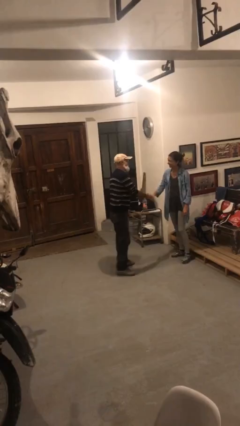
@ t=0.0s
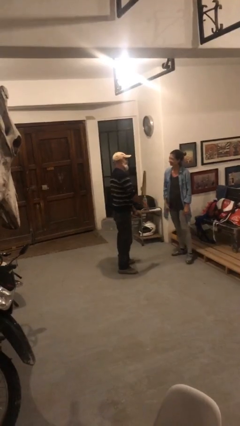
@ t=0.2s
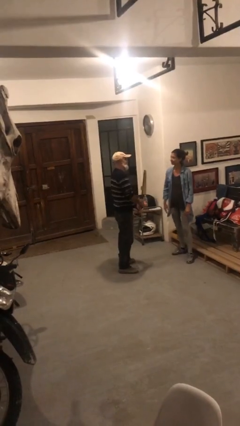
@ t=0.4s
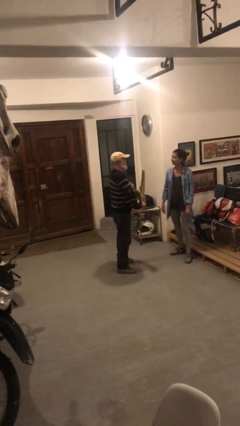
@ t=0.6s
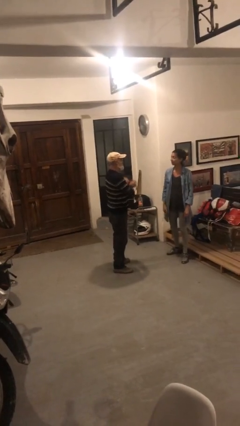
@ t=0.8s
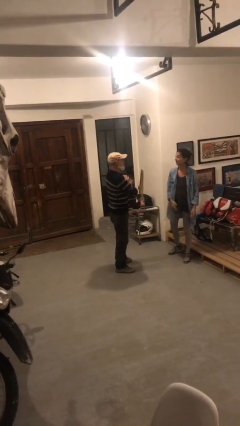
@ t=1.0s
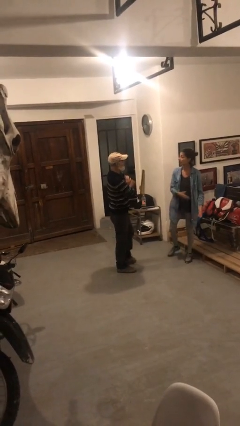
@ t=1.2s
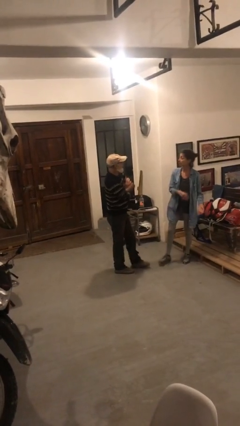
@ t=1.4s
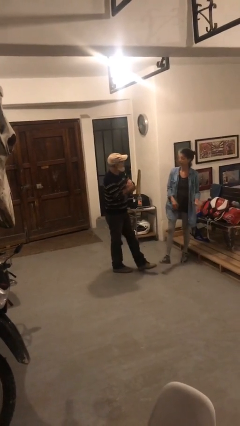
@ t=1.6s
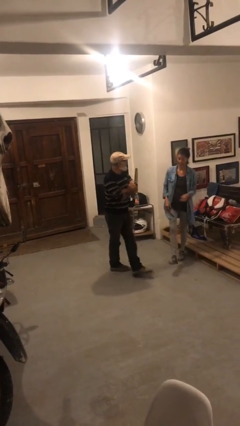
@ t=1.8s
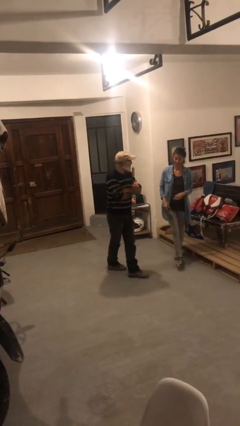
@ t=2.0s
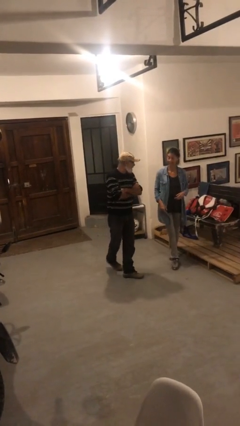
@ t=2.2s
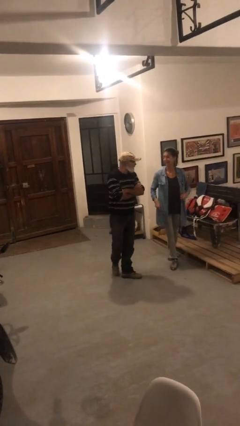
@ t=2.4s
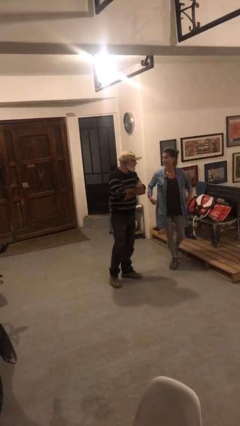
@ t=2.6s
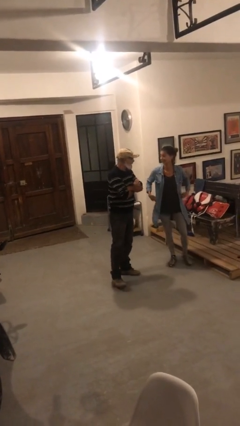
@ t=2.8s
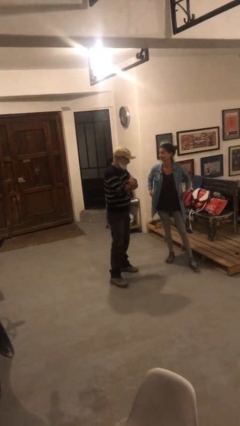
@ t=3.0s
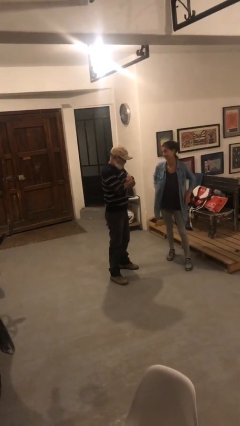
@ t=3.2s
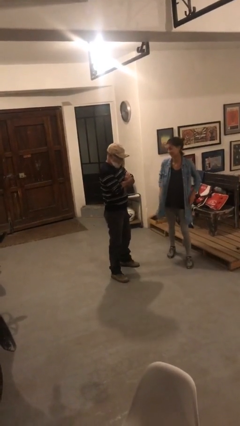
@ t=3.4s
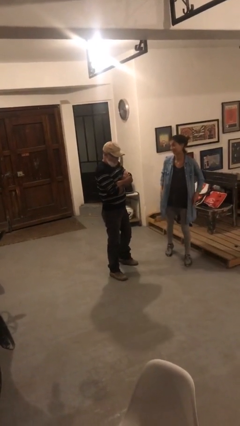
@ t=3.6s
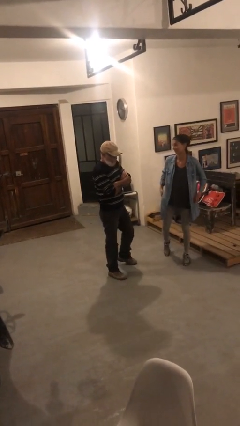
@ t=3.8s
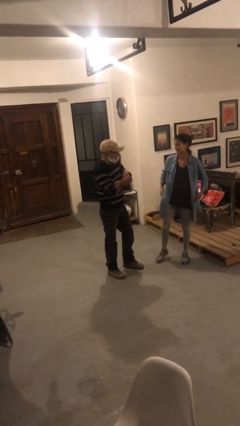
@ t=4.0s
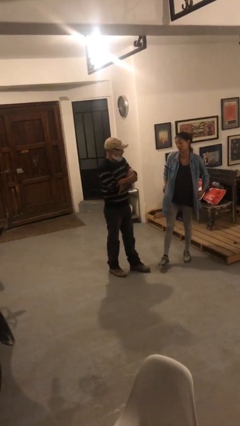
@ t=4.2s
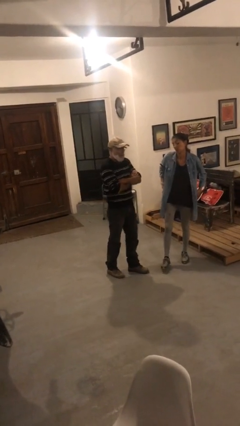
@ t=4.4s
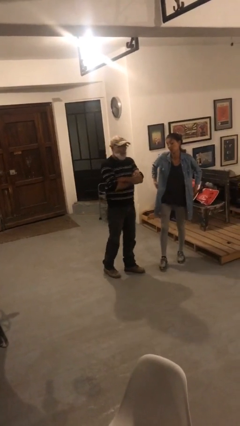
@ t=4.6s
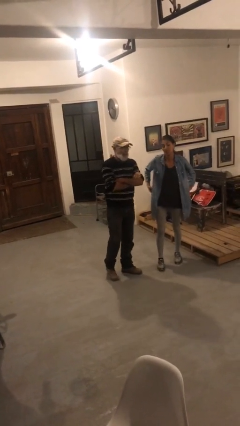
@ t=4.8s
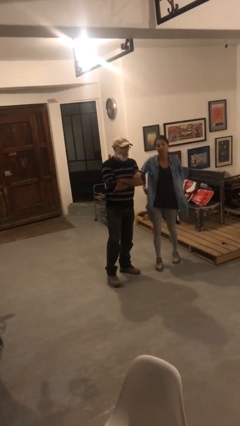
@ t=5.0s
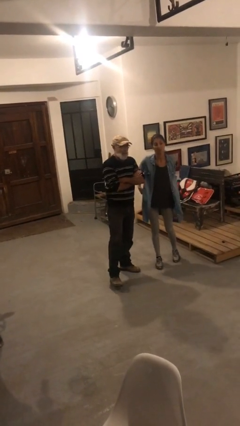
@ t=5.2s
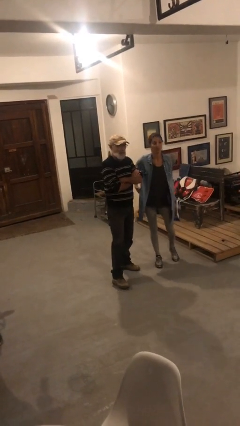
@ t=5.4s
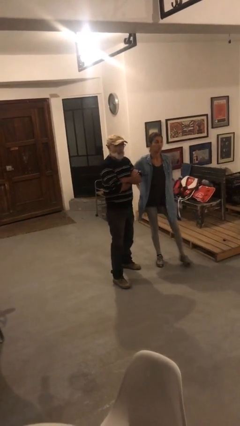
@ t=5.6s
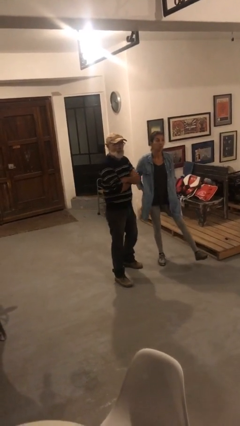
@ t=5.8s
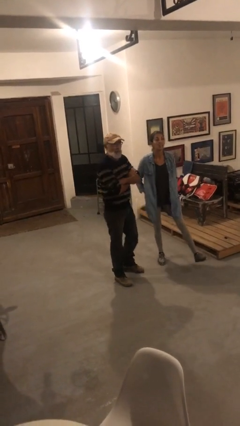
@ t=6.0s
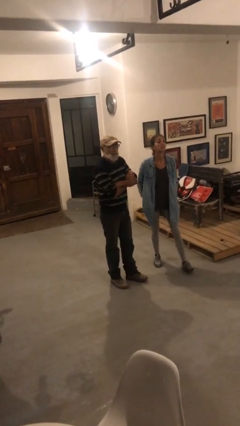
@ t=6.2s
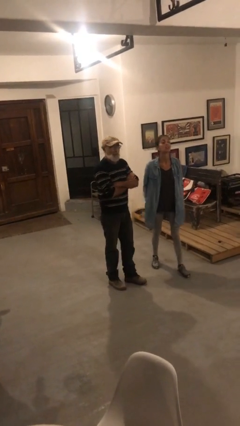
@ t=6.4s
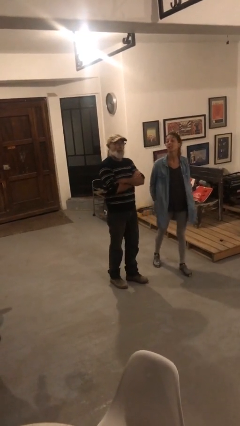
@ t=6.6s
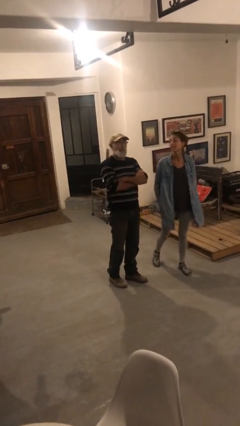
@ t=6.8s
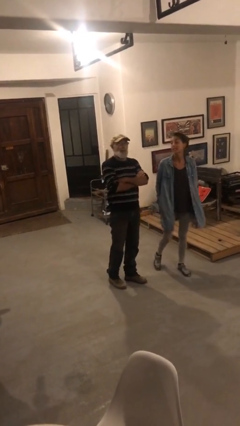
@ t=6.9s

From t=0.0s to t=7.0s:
person talks to person

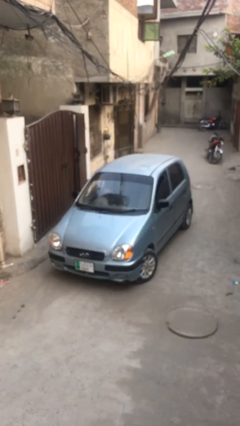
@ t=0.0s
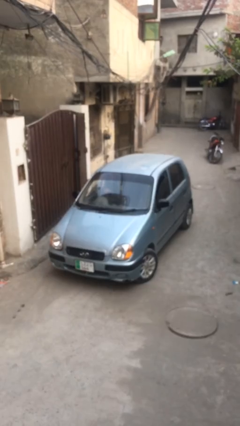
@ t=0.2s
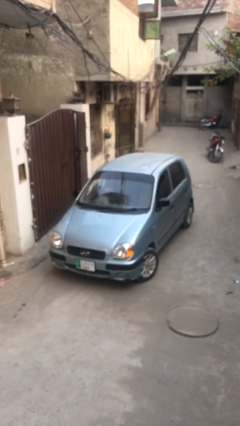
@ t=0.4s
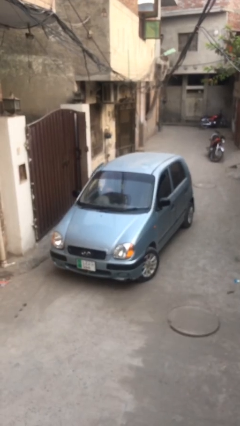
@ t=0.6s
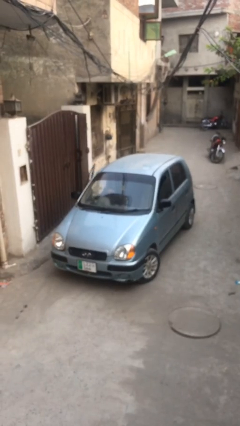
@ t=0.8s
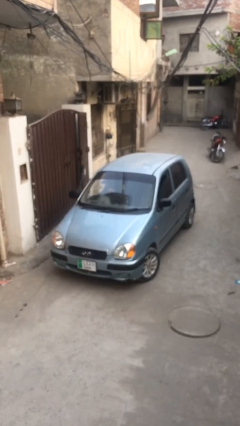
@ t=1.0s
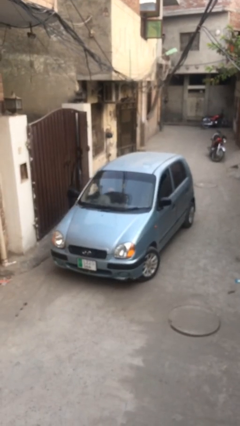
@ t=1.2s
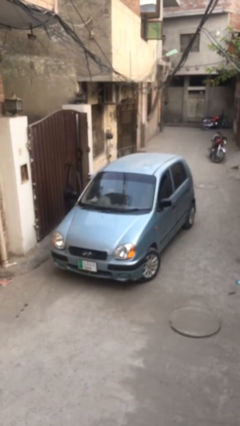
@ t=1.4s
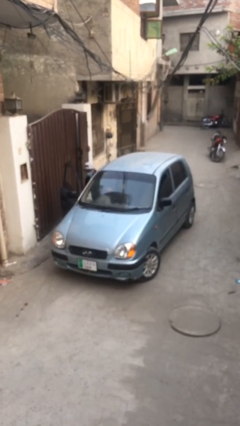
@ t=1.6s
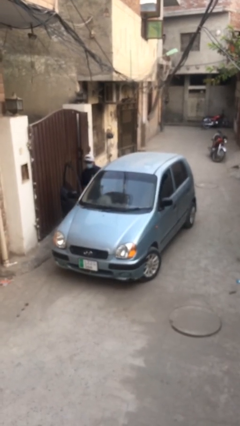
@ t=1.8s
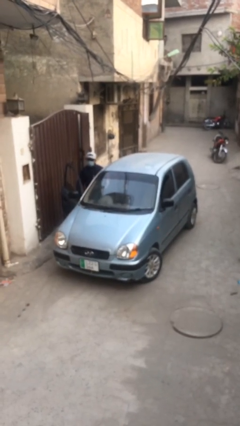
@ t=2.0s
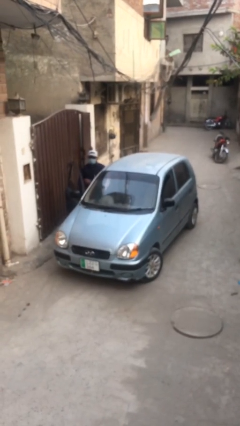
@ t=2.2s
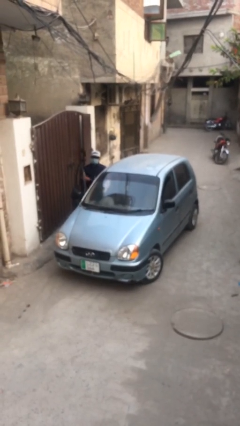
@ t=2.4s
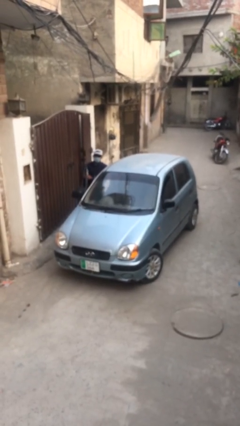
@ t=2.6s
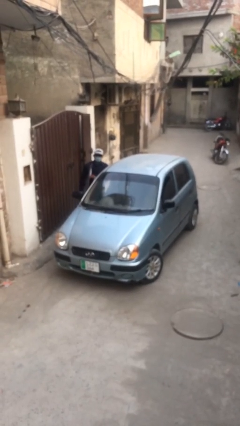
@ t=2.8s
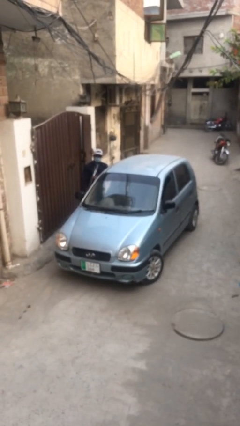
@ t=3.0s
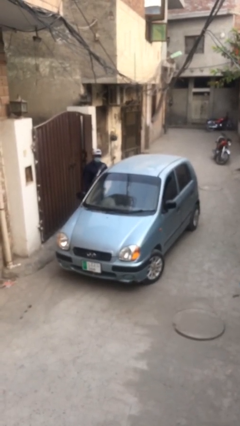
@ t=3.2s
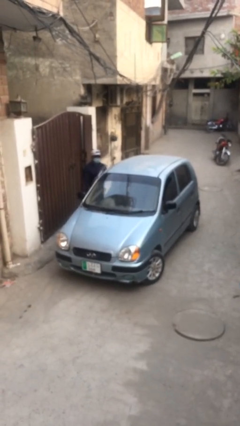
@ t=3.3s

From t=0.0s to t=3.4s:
car drops off person

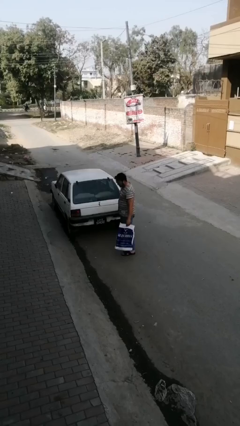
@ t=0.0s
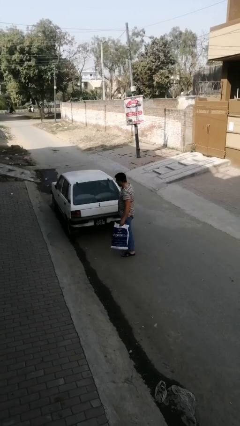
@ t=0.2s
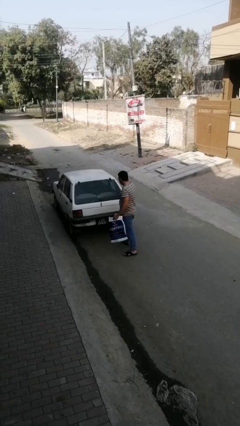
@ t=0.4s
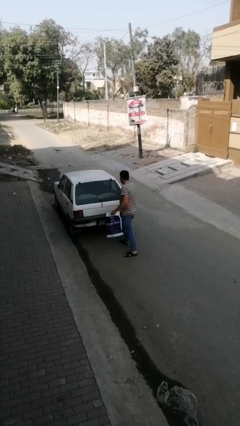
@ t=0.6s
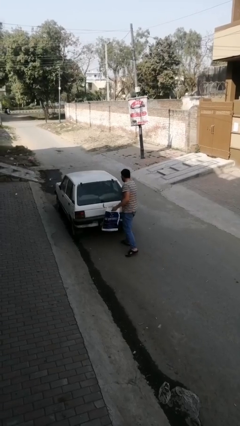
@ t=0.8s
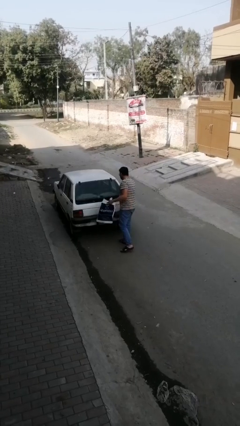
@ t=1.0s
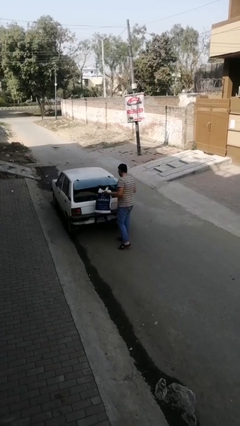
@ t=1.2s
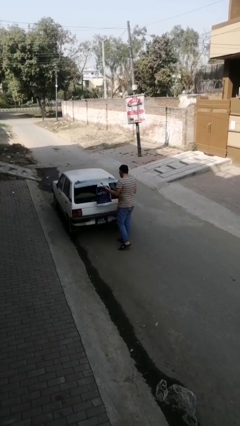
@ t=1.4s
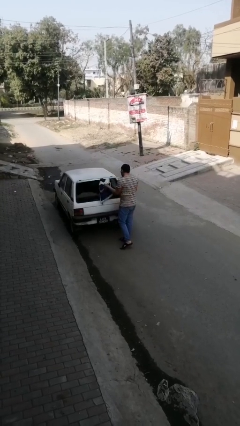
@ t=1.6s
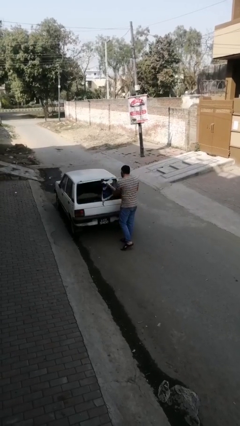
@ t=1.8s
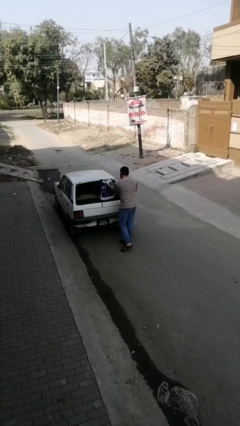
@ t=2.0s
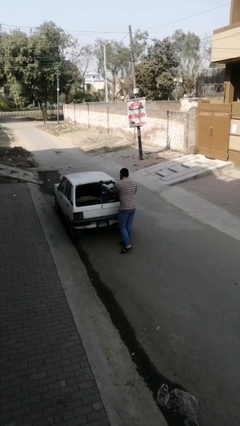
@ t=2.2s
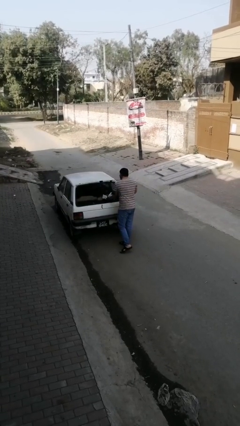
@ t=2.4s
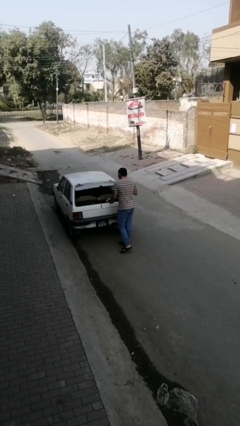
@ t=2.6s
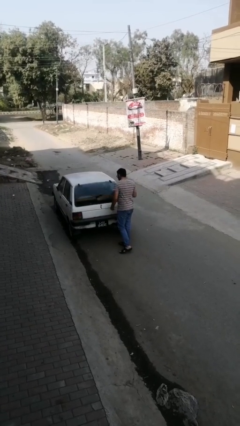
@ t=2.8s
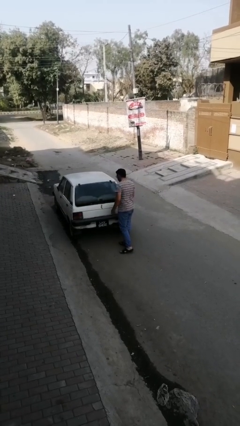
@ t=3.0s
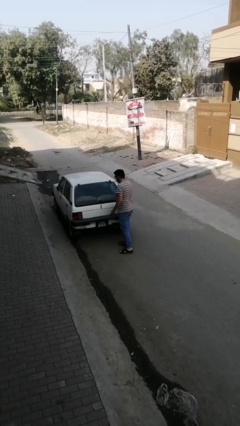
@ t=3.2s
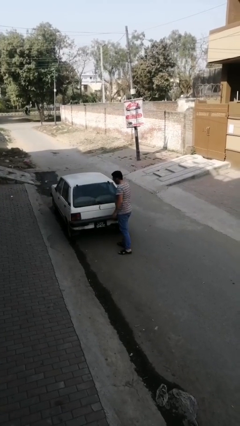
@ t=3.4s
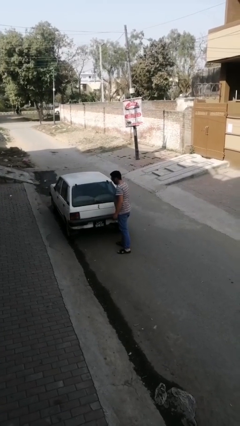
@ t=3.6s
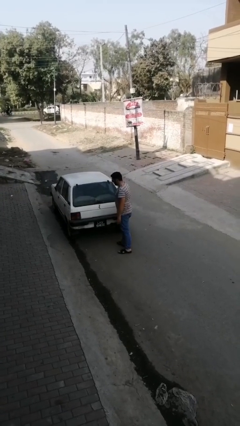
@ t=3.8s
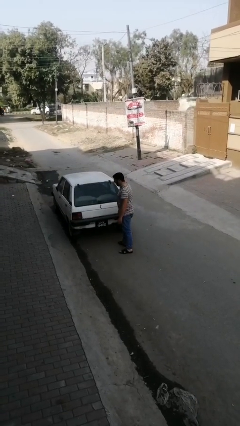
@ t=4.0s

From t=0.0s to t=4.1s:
person loads car

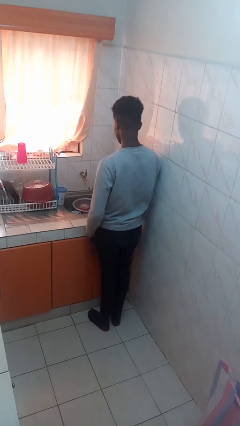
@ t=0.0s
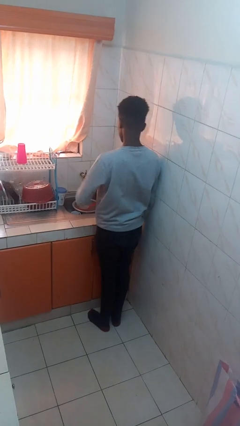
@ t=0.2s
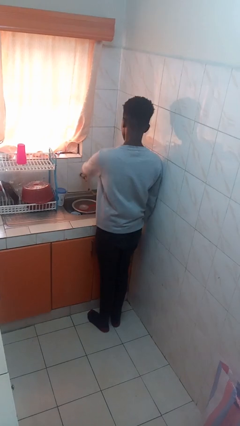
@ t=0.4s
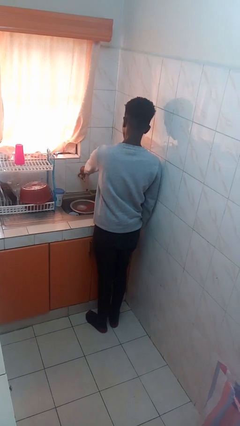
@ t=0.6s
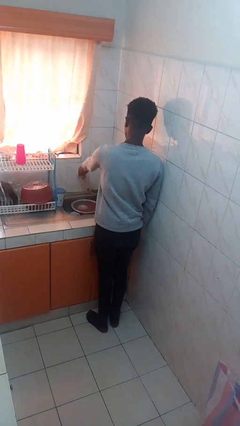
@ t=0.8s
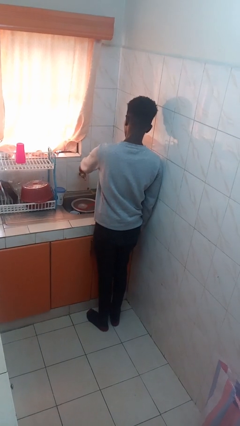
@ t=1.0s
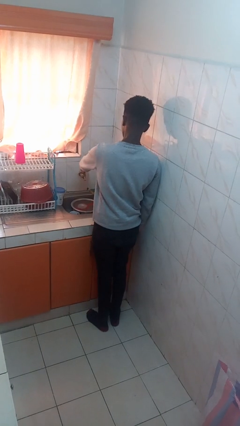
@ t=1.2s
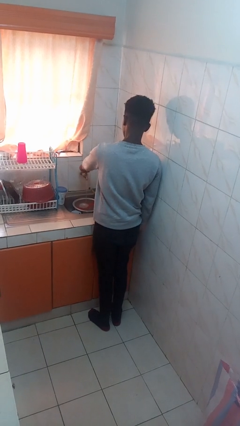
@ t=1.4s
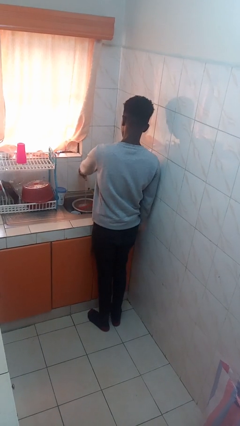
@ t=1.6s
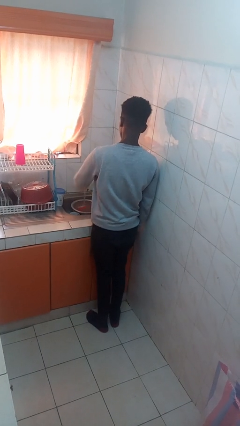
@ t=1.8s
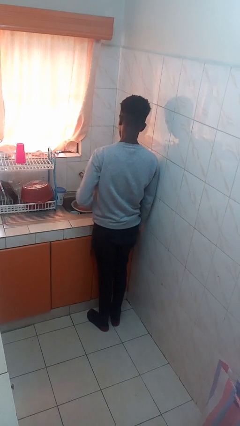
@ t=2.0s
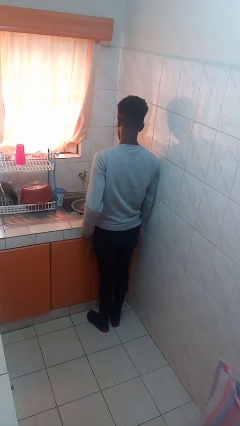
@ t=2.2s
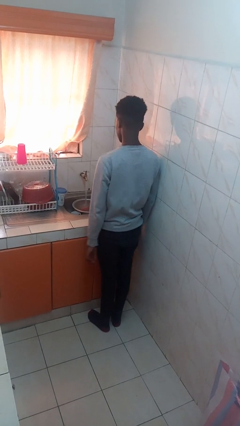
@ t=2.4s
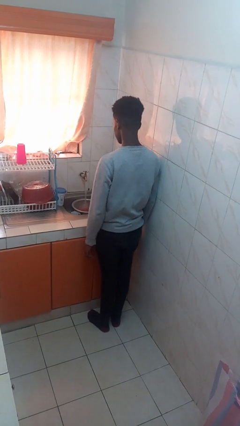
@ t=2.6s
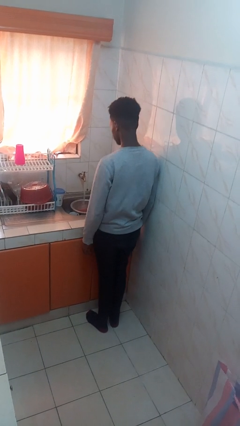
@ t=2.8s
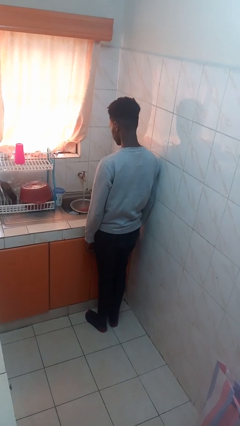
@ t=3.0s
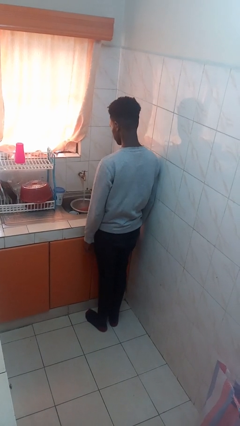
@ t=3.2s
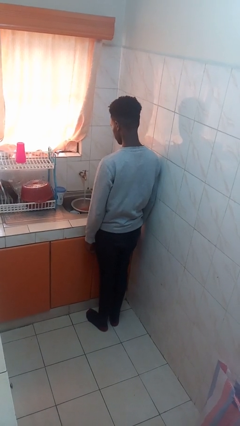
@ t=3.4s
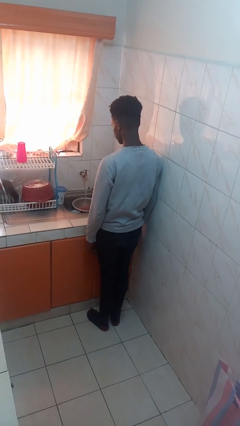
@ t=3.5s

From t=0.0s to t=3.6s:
person turns on faucet
